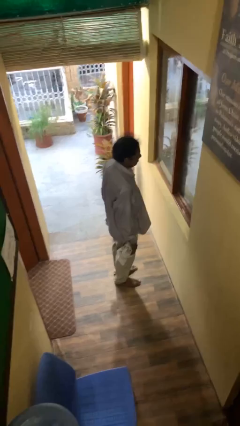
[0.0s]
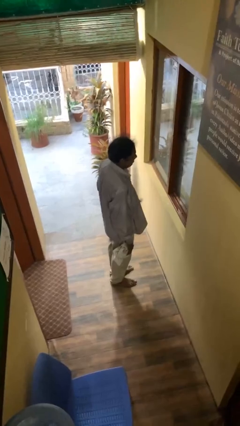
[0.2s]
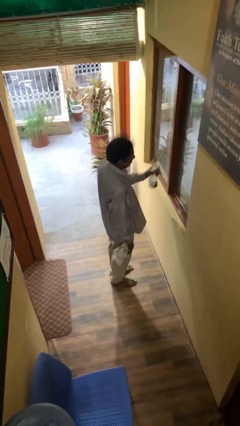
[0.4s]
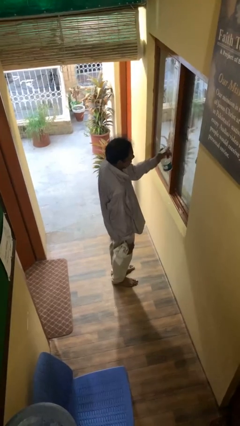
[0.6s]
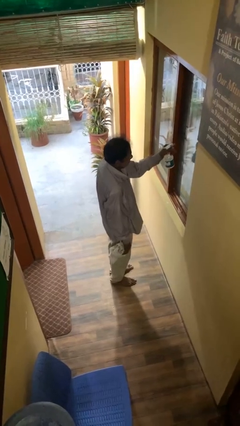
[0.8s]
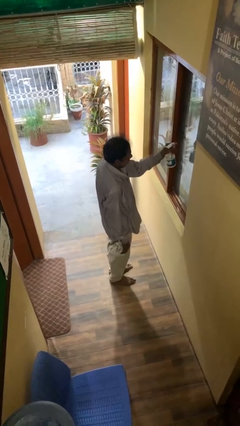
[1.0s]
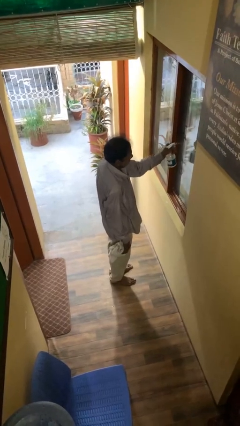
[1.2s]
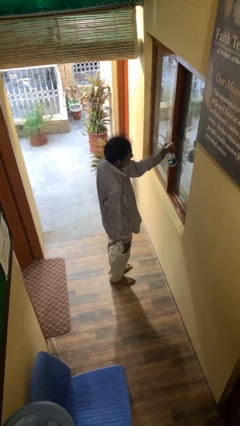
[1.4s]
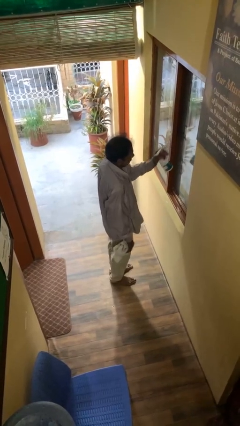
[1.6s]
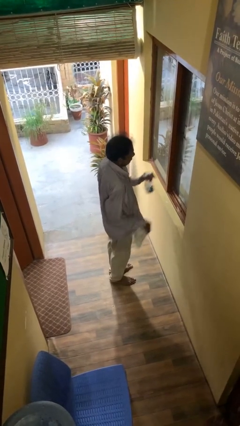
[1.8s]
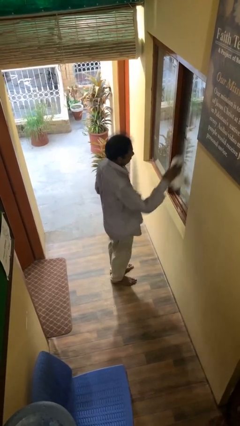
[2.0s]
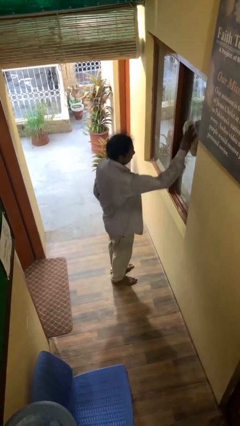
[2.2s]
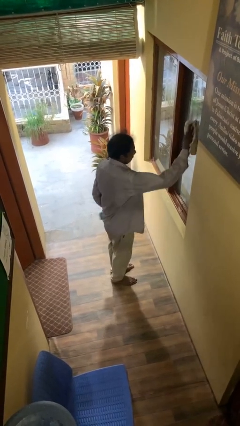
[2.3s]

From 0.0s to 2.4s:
person sprays from bottle

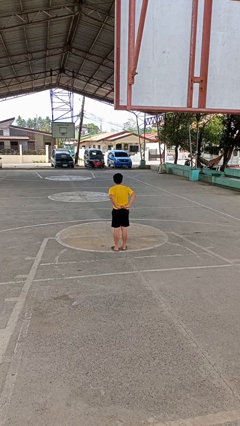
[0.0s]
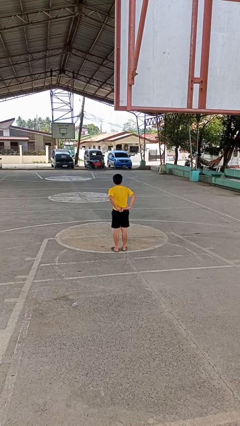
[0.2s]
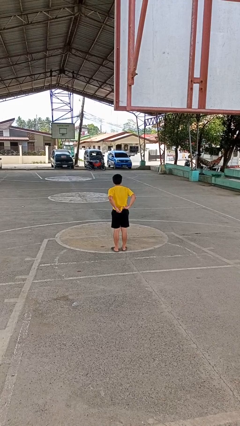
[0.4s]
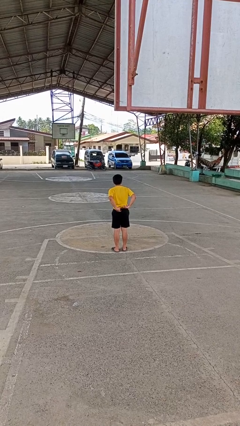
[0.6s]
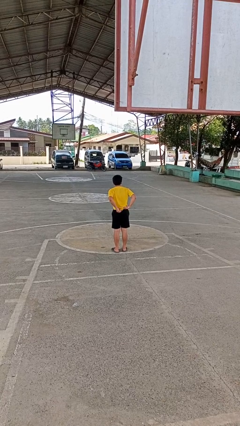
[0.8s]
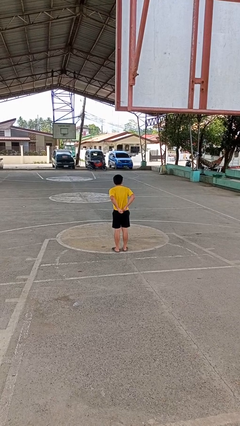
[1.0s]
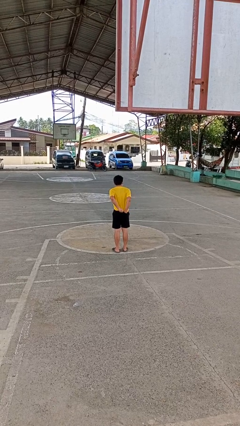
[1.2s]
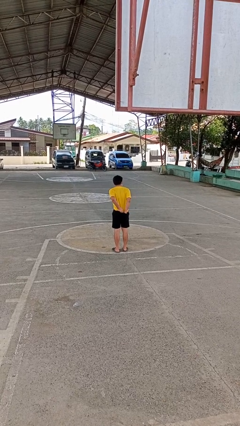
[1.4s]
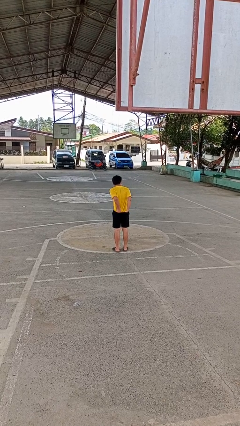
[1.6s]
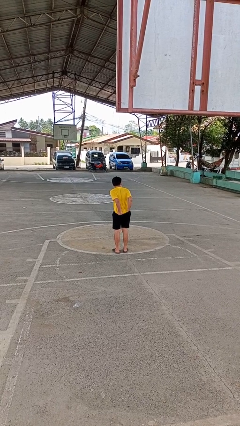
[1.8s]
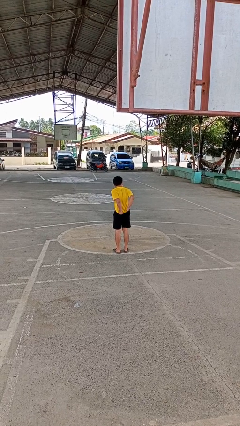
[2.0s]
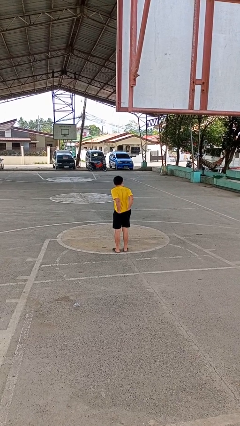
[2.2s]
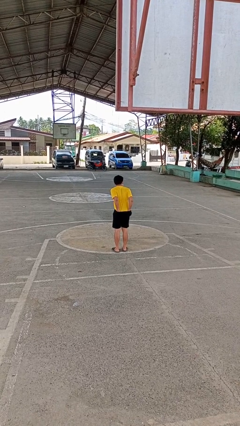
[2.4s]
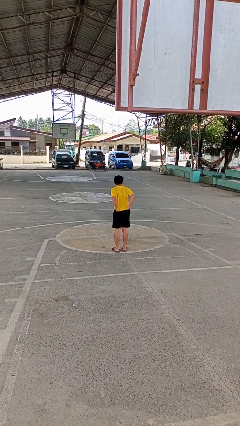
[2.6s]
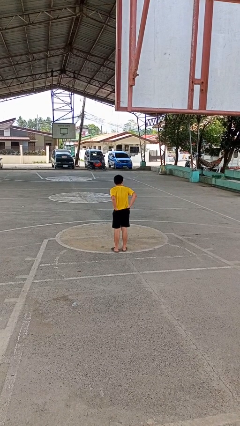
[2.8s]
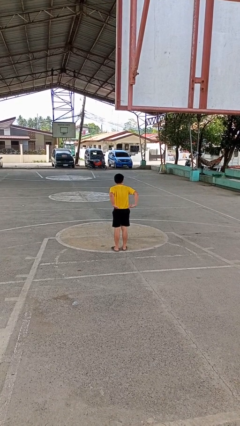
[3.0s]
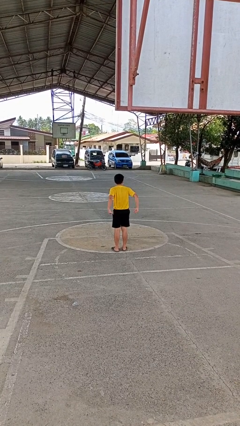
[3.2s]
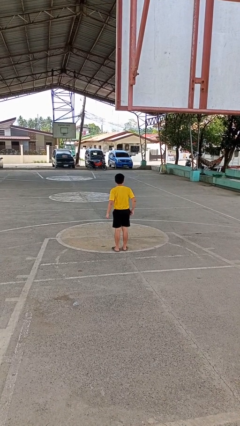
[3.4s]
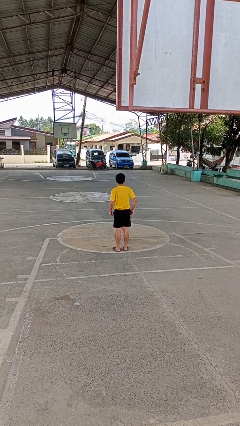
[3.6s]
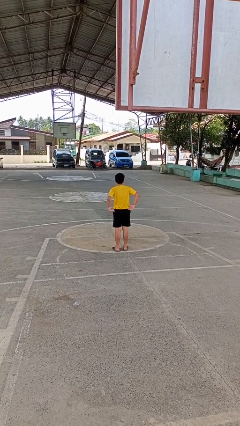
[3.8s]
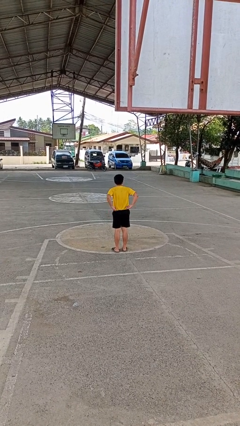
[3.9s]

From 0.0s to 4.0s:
person tucks in shirt

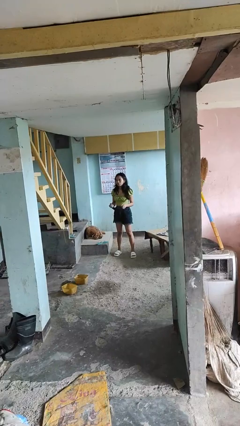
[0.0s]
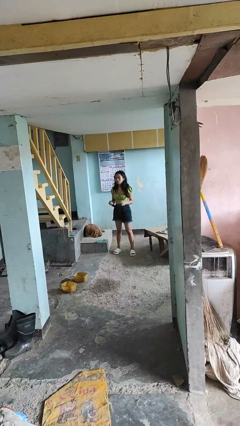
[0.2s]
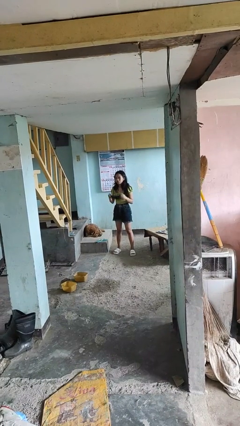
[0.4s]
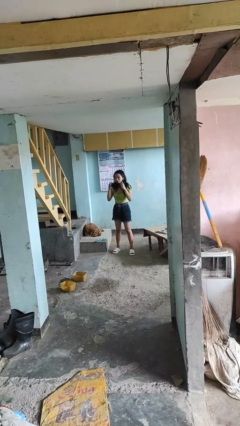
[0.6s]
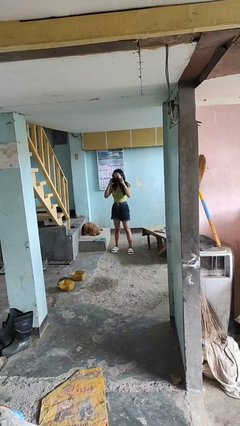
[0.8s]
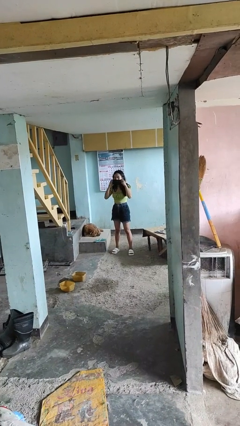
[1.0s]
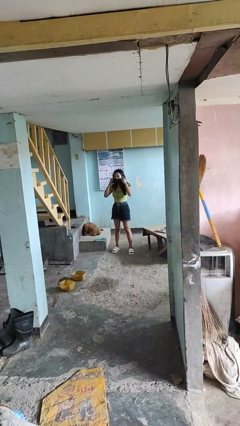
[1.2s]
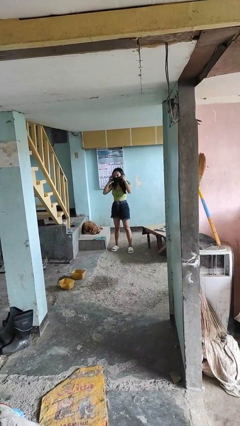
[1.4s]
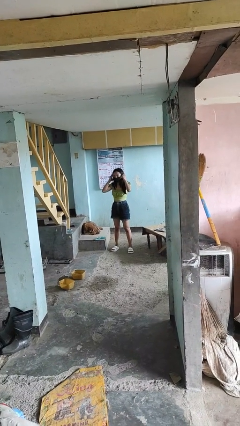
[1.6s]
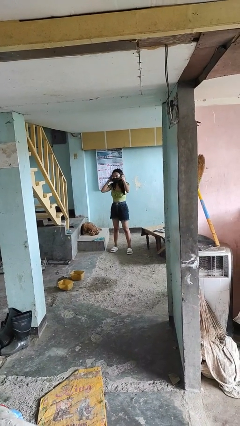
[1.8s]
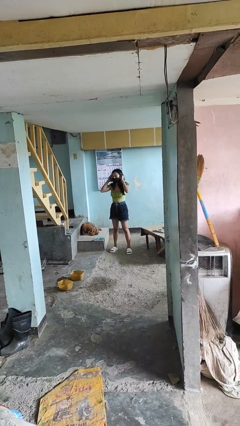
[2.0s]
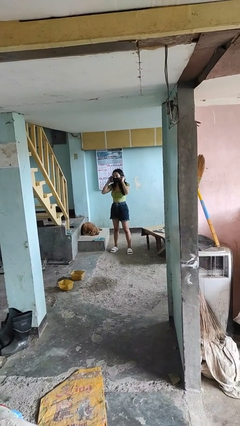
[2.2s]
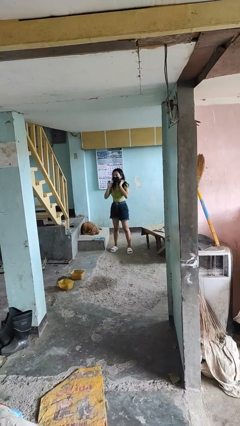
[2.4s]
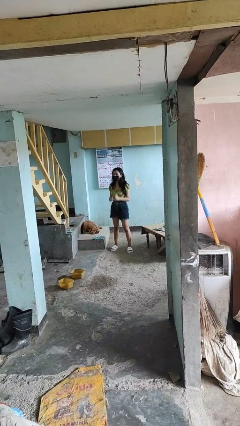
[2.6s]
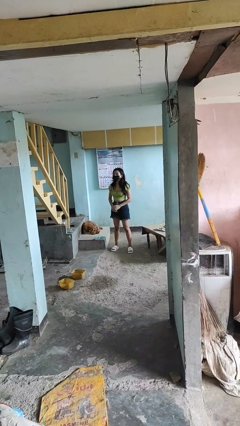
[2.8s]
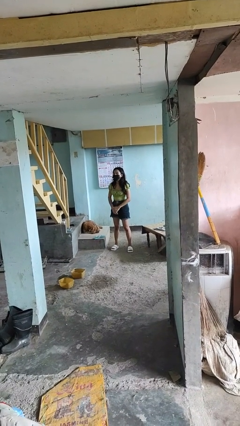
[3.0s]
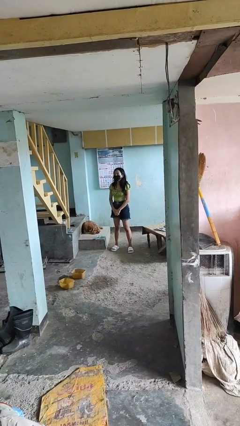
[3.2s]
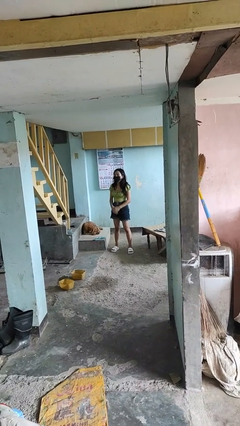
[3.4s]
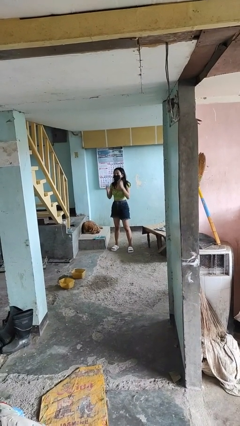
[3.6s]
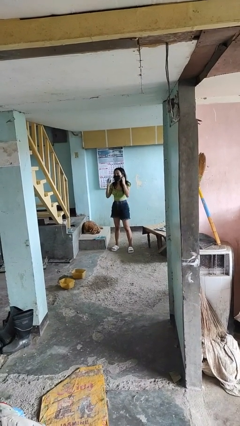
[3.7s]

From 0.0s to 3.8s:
person puts on facemask

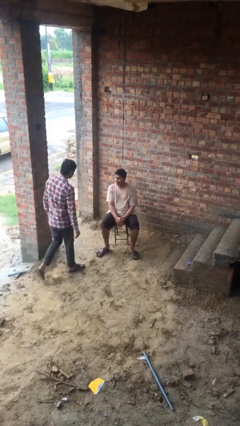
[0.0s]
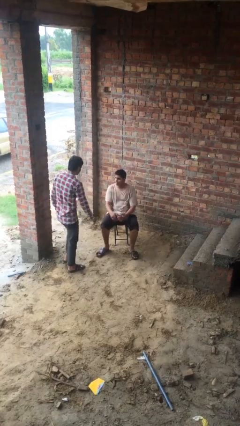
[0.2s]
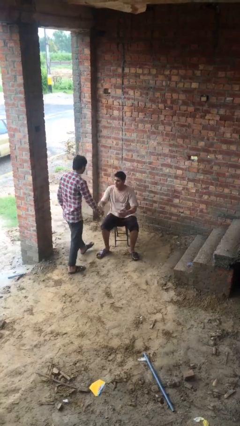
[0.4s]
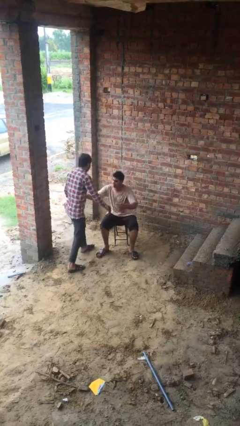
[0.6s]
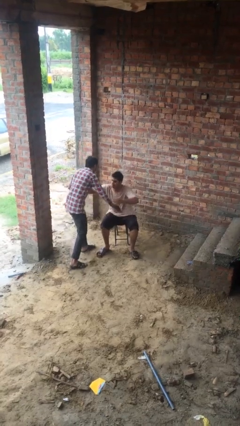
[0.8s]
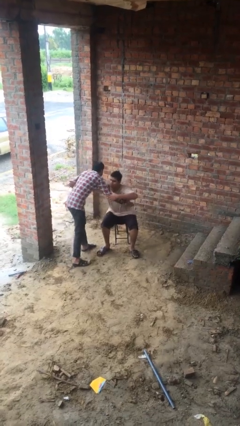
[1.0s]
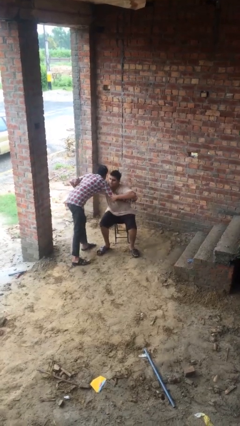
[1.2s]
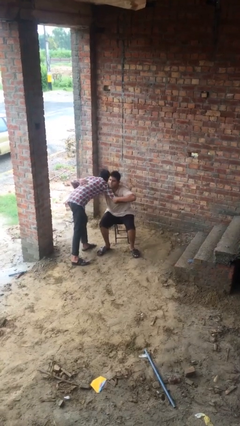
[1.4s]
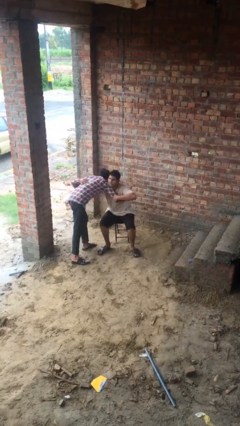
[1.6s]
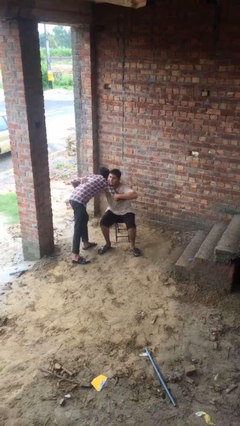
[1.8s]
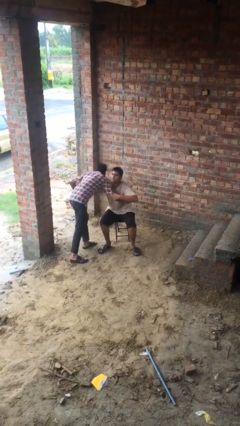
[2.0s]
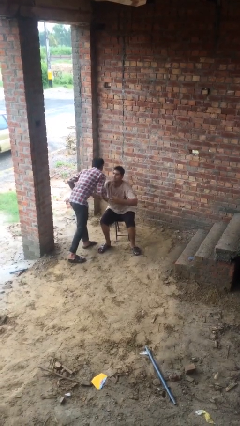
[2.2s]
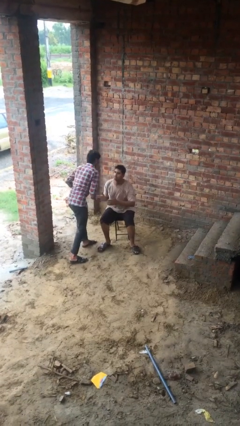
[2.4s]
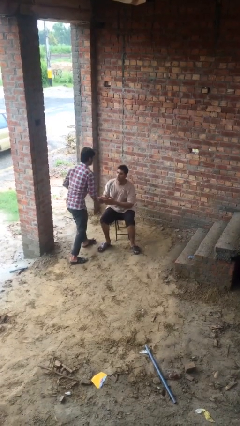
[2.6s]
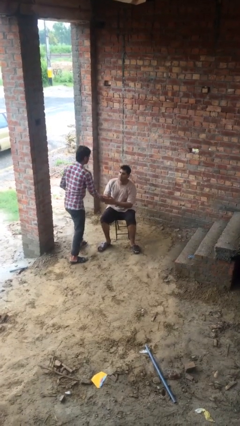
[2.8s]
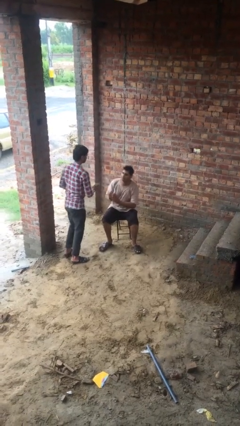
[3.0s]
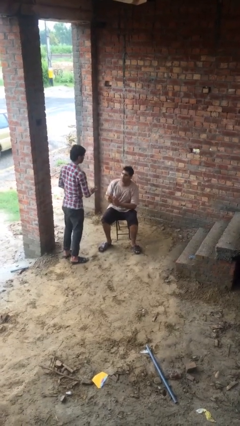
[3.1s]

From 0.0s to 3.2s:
person embraces person

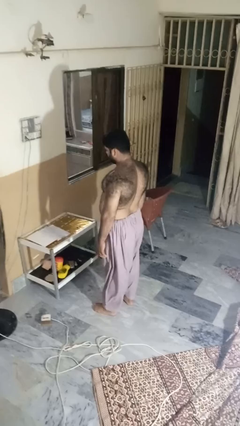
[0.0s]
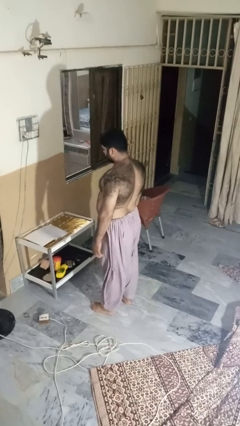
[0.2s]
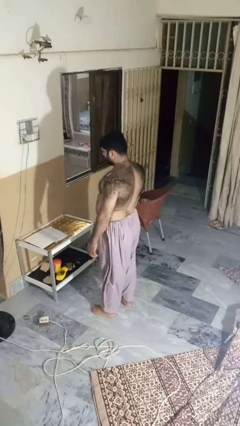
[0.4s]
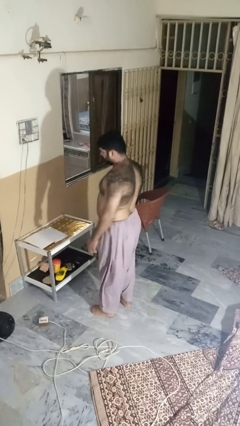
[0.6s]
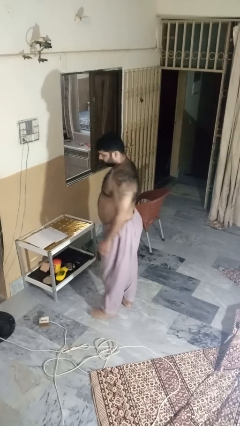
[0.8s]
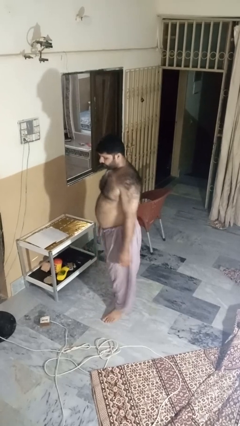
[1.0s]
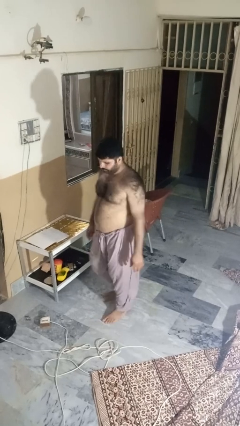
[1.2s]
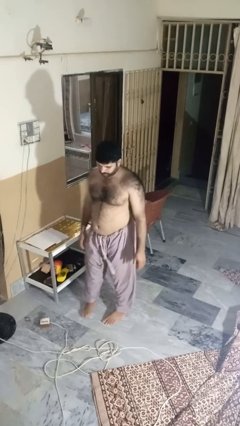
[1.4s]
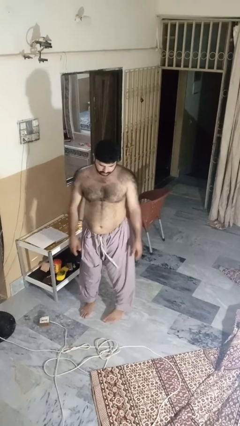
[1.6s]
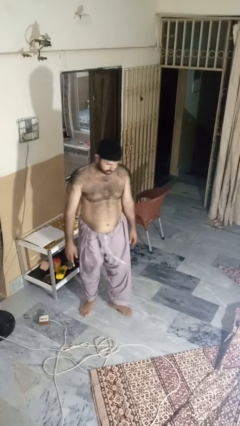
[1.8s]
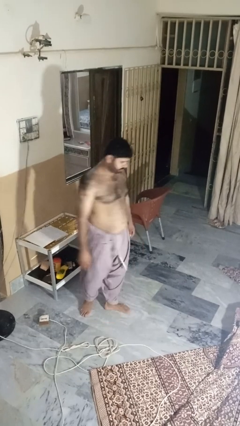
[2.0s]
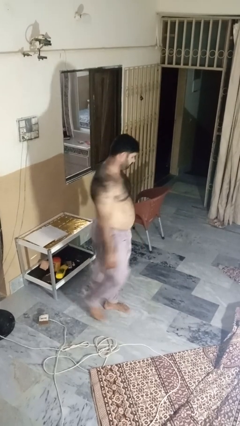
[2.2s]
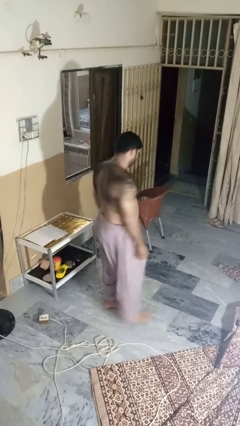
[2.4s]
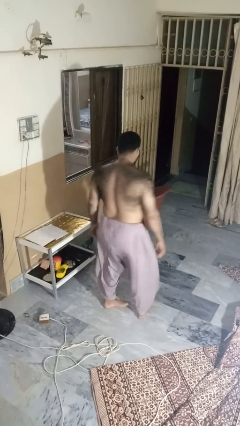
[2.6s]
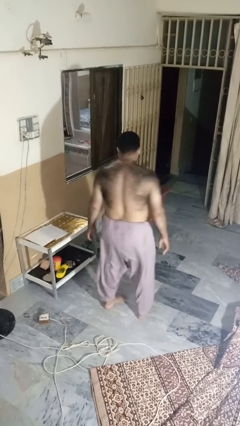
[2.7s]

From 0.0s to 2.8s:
person twirls

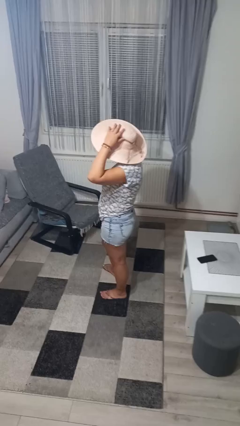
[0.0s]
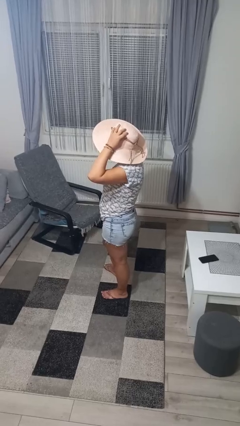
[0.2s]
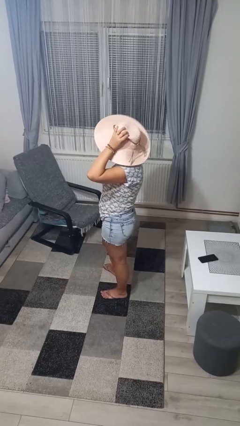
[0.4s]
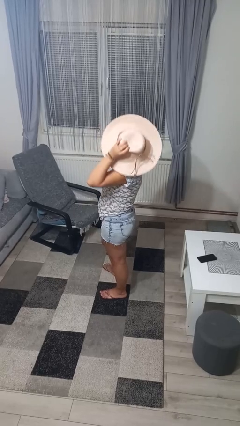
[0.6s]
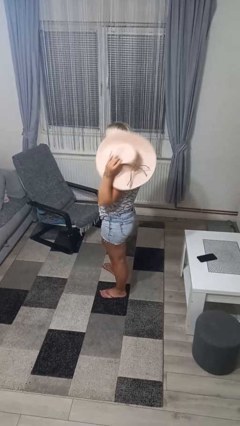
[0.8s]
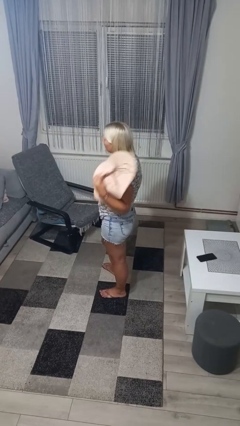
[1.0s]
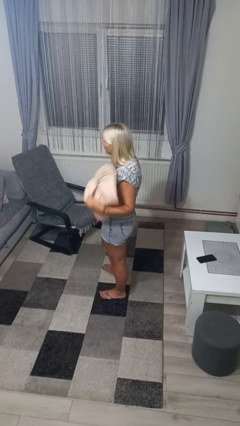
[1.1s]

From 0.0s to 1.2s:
person takes off hat
